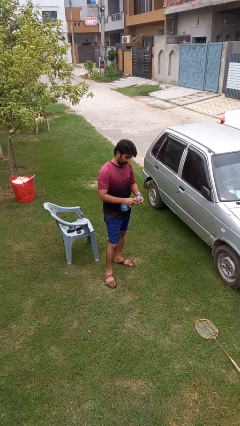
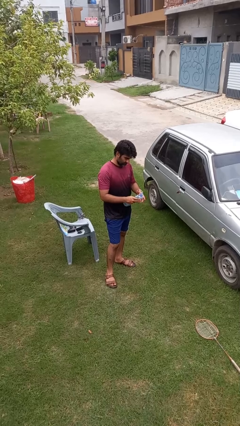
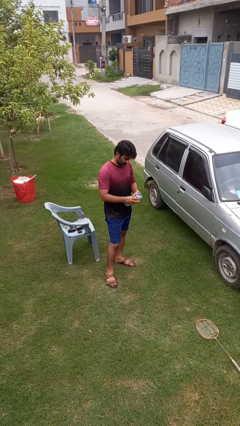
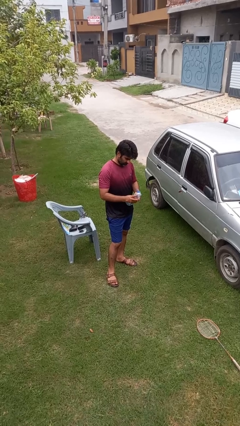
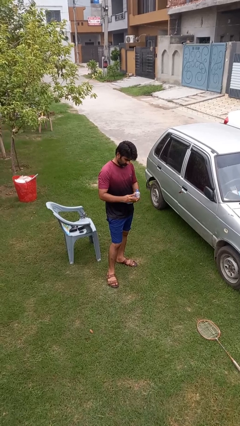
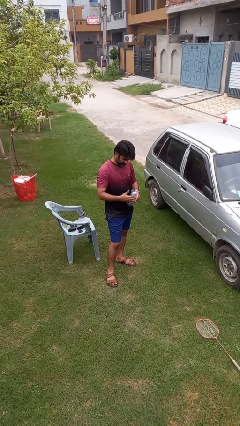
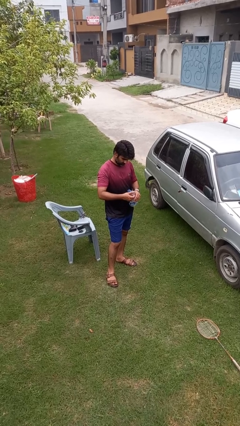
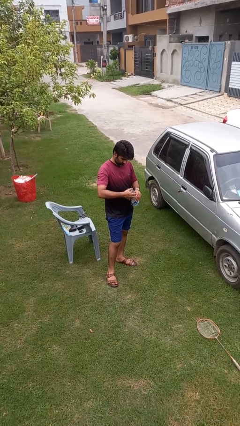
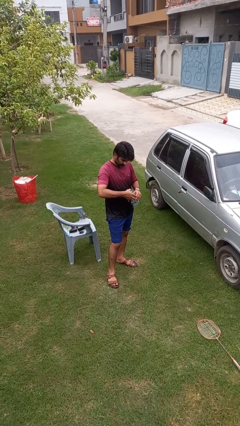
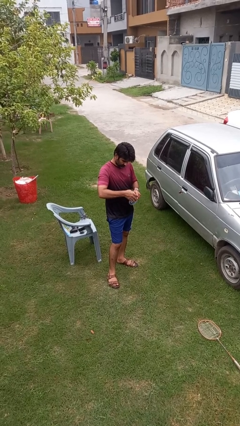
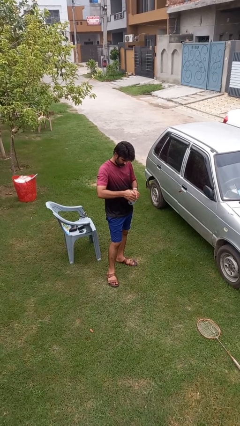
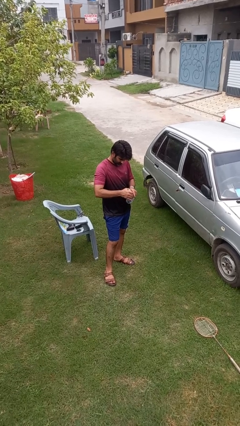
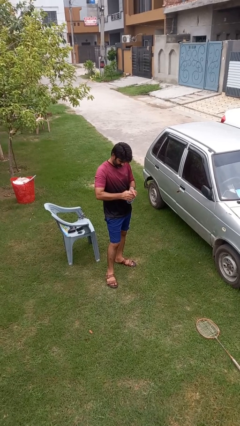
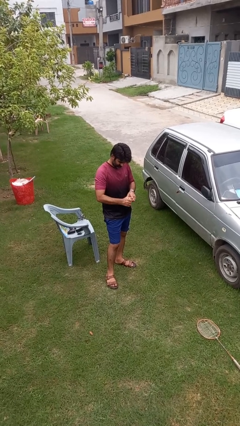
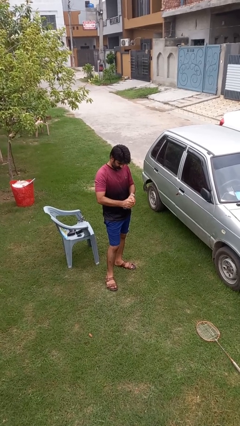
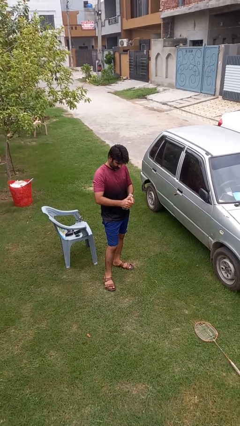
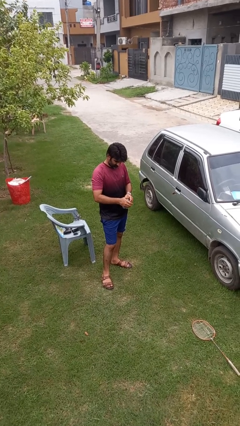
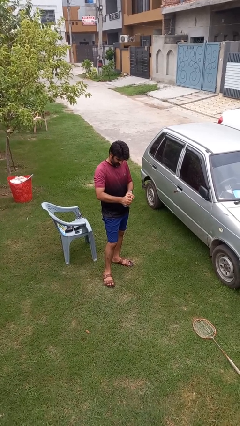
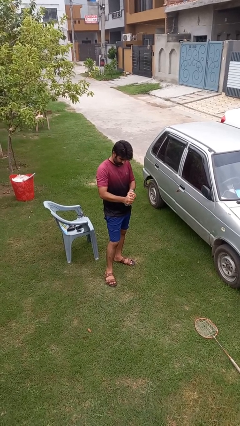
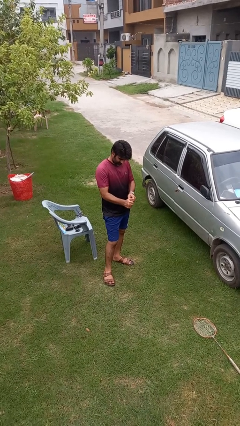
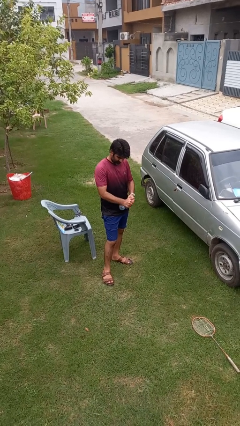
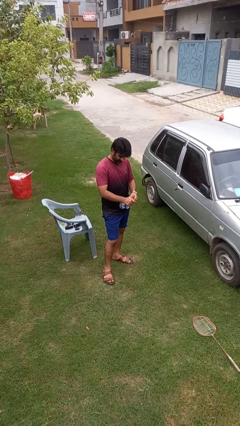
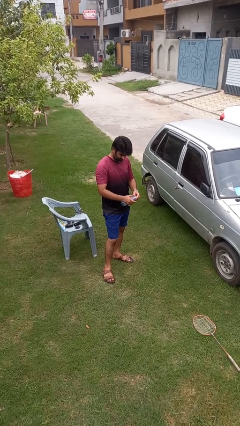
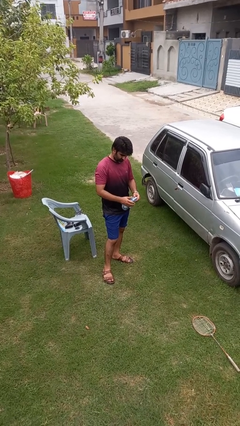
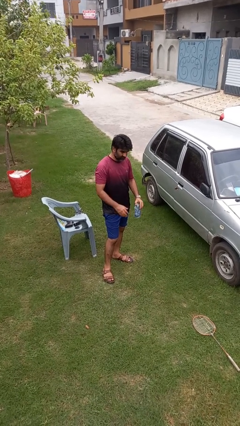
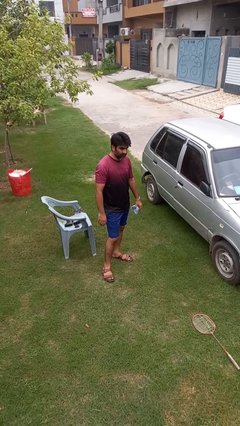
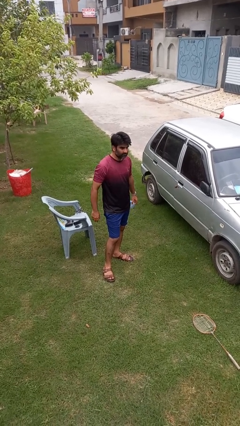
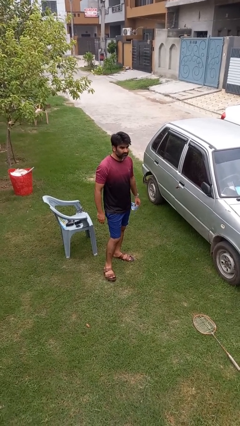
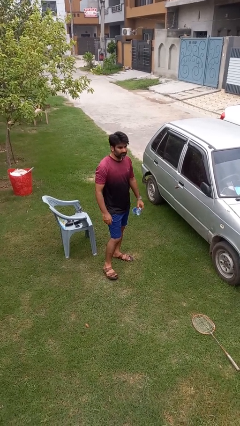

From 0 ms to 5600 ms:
person squeezes object

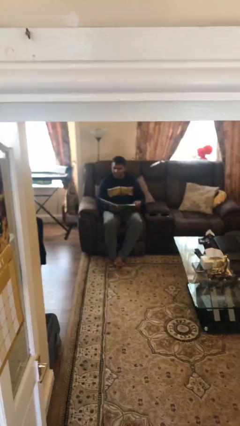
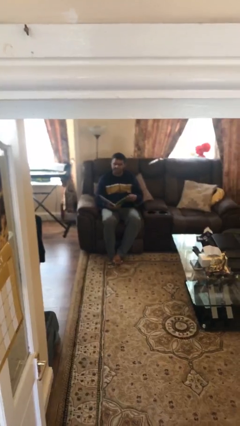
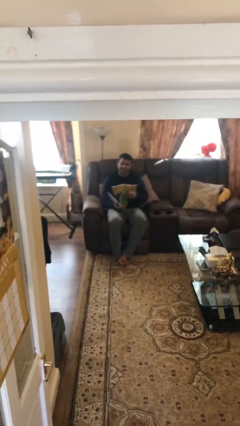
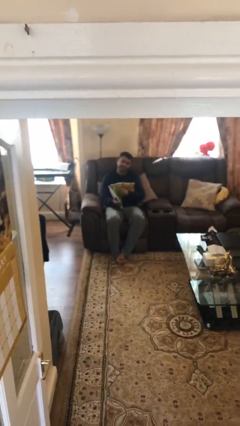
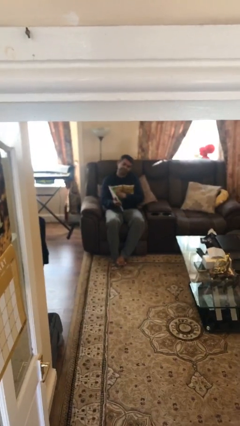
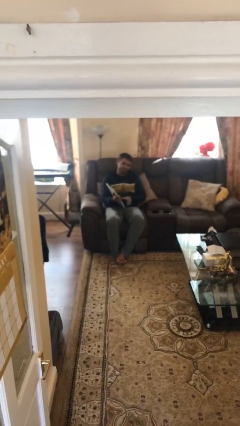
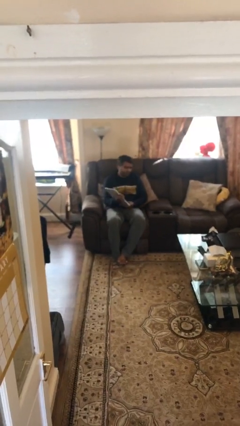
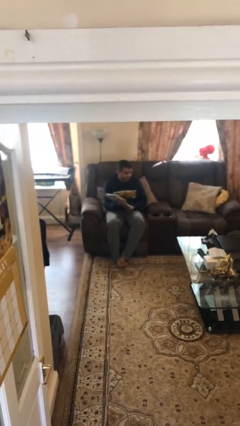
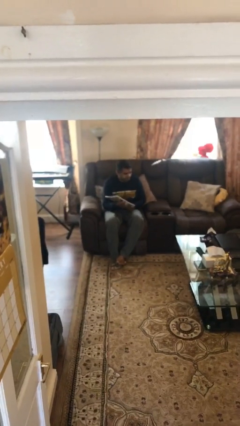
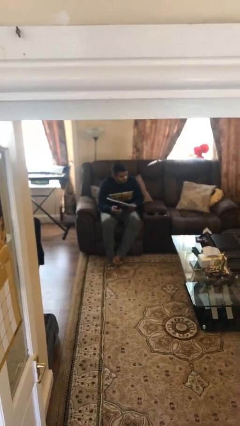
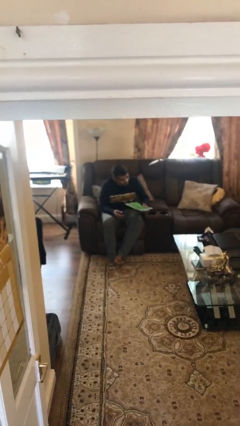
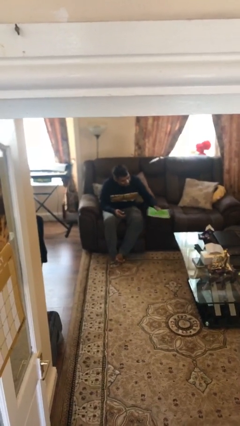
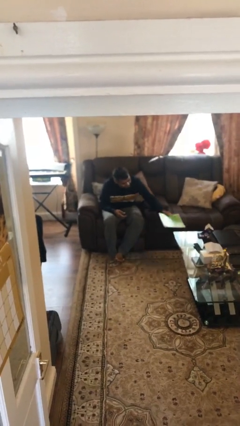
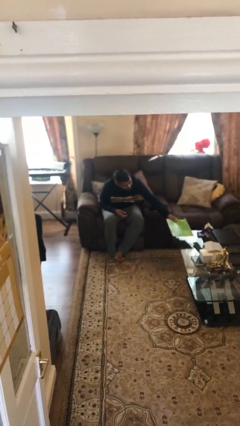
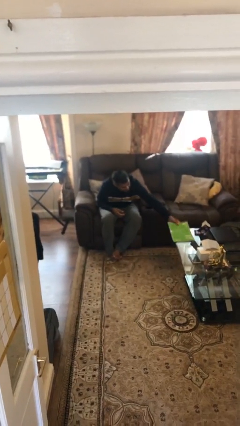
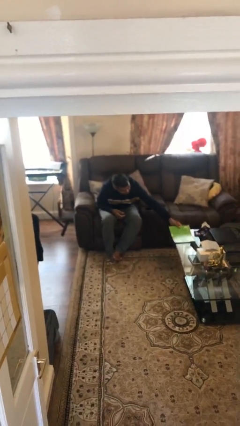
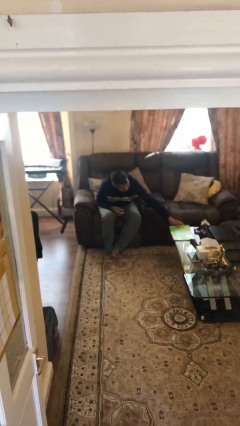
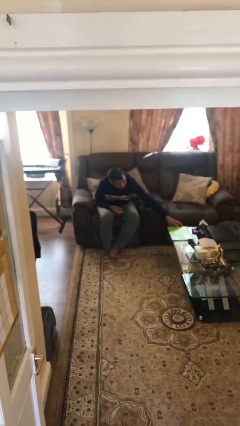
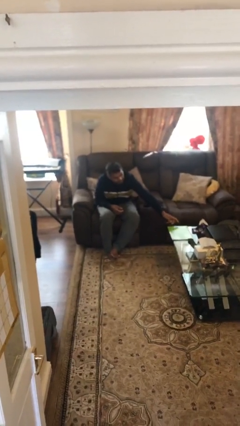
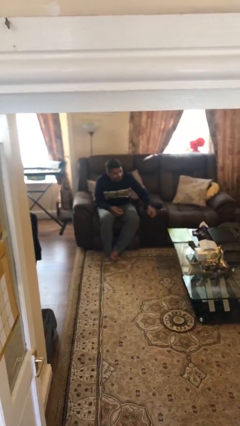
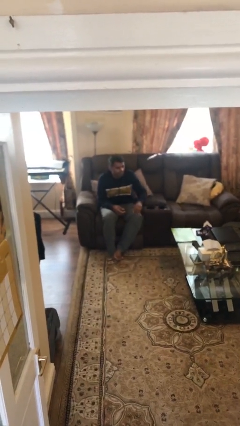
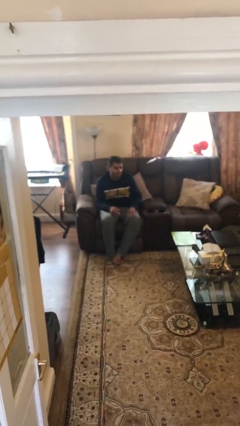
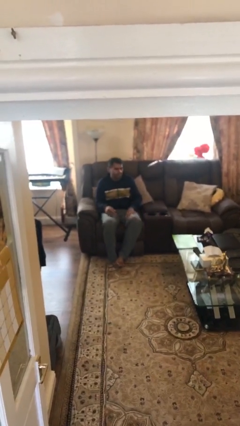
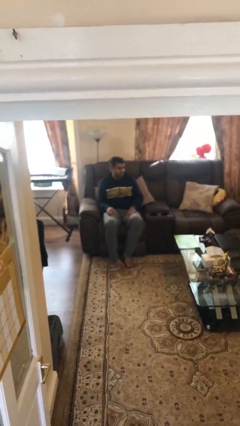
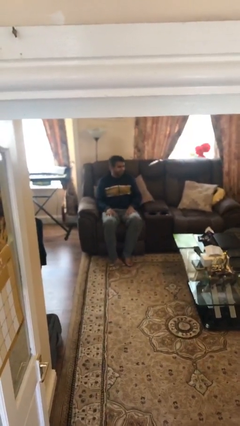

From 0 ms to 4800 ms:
person puts down object on table

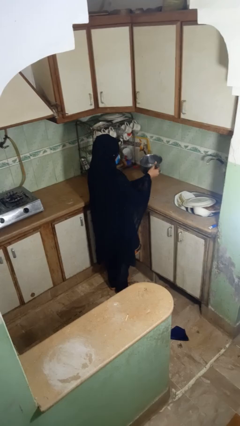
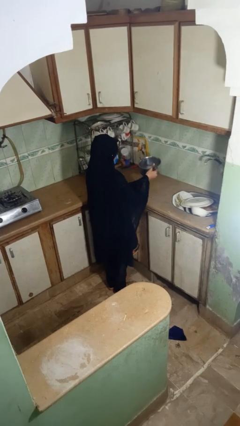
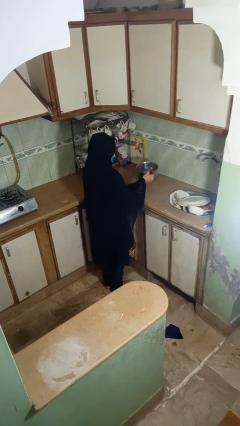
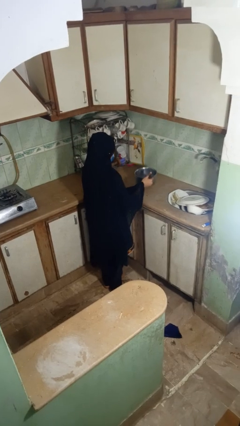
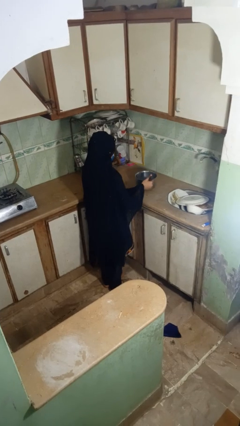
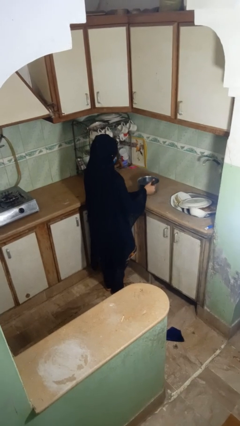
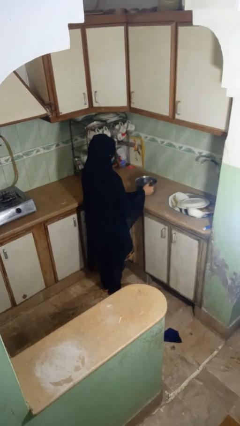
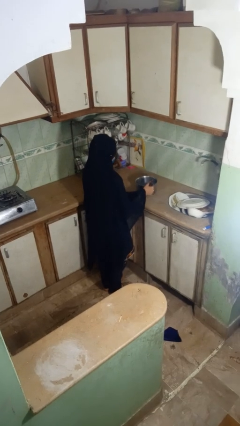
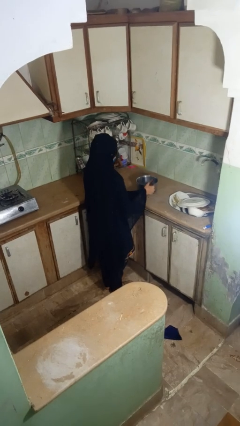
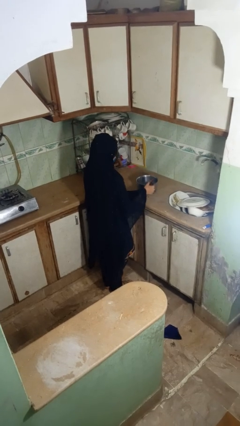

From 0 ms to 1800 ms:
person puts down object on countertop

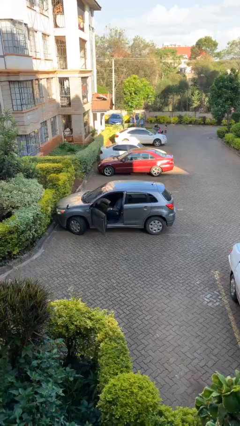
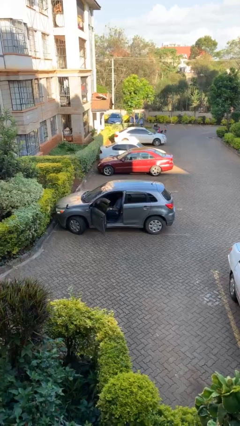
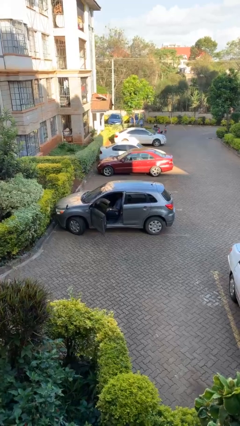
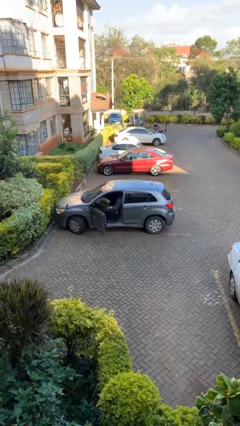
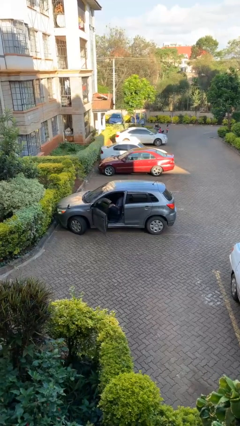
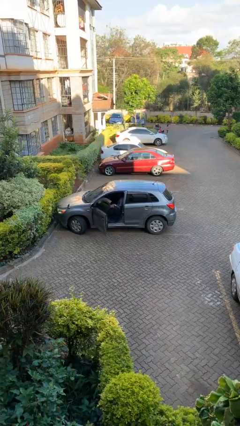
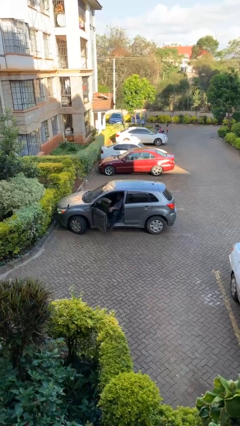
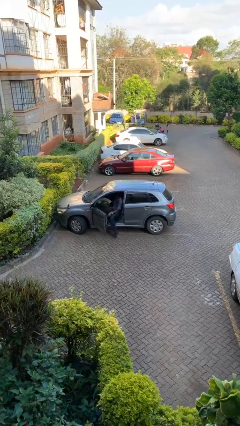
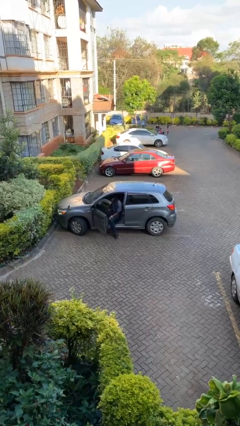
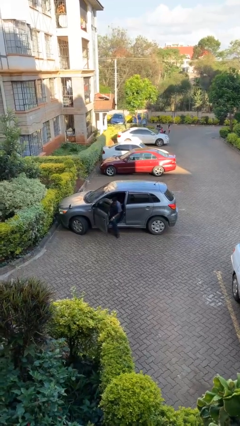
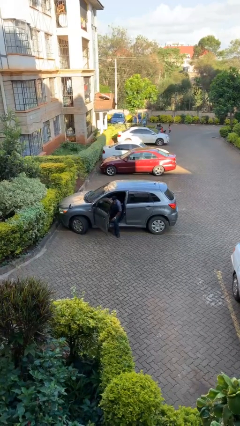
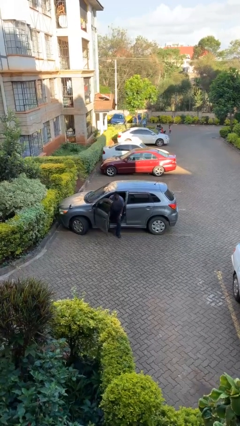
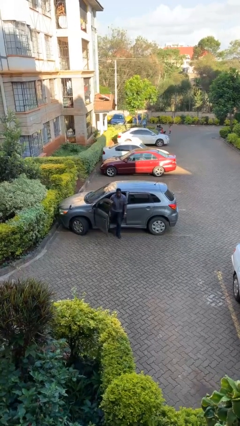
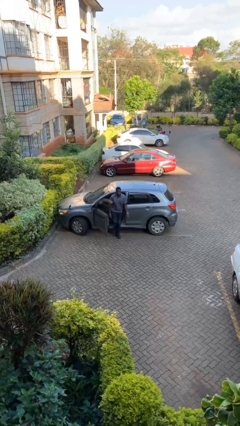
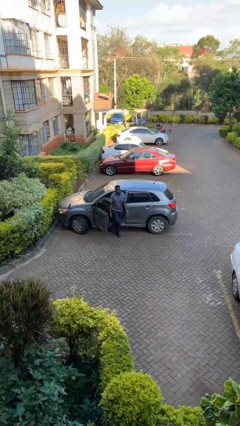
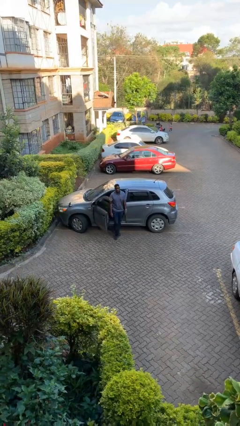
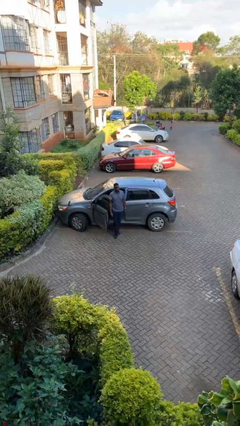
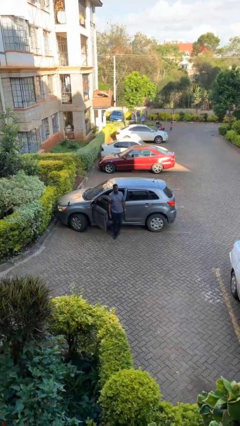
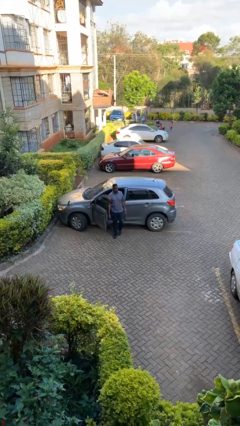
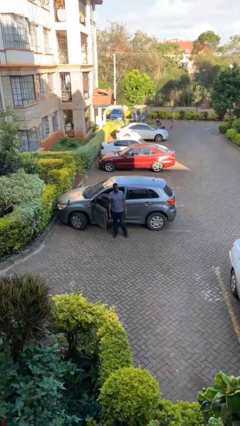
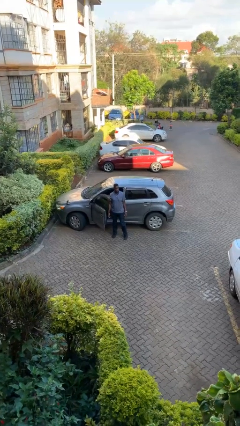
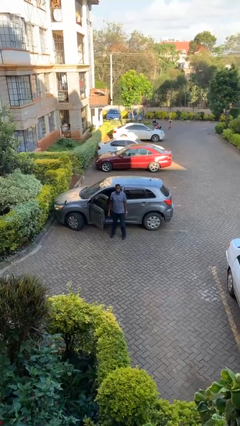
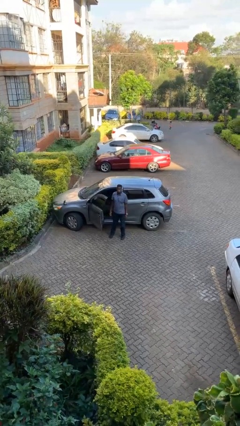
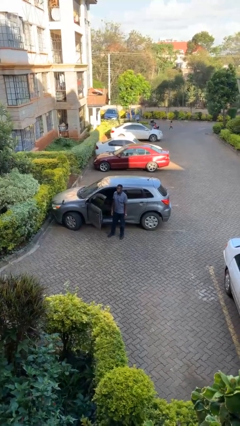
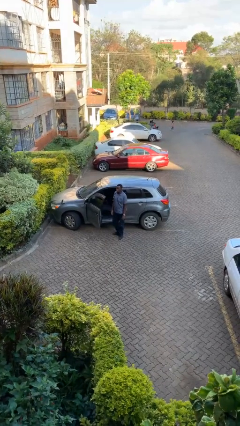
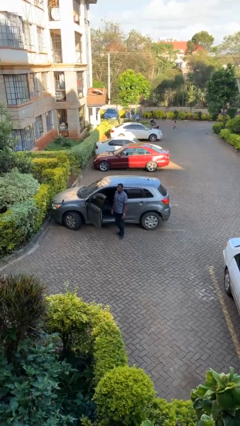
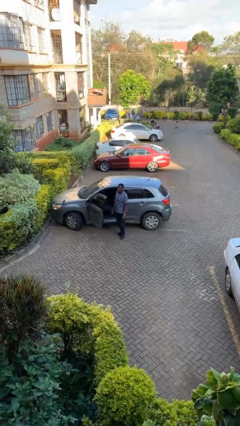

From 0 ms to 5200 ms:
person exits car

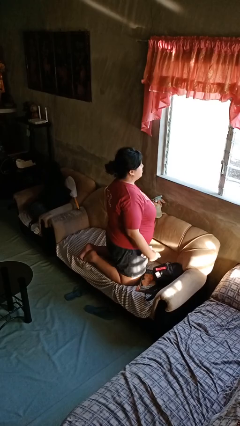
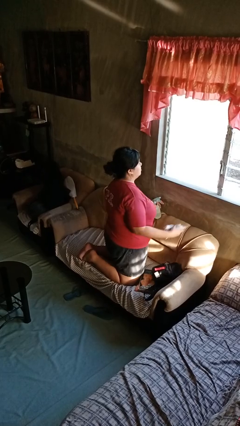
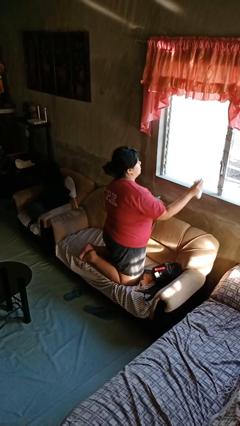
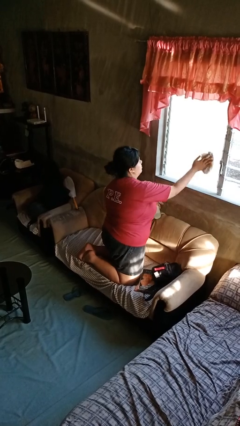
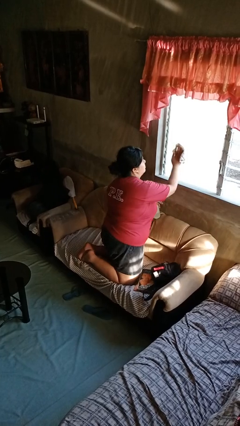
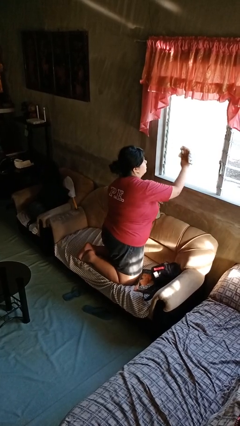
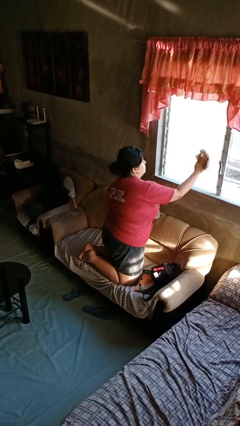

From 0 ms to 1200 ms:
person washes window
